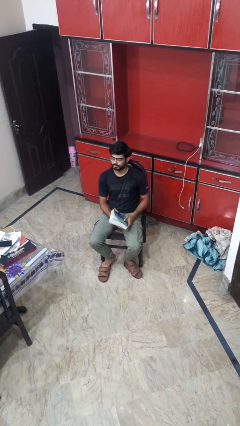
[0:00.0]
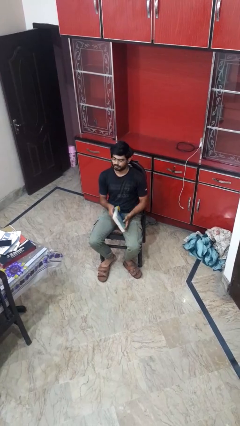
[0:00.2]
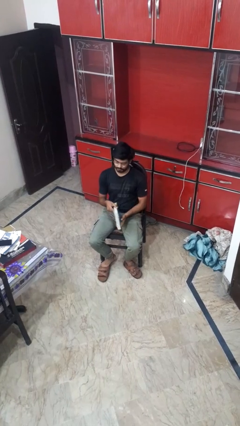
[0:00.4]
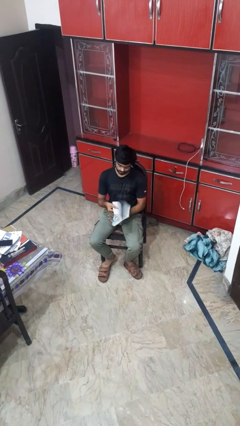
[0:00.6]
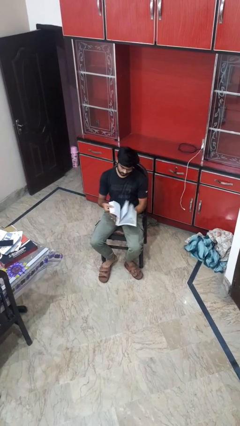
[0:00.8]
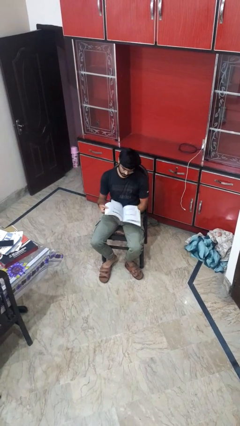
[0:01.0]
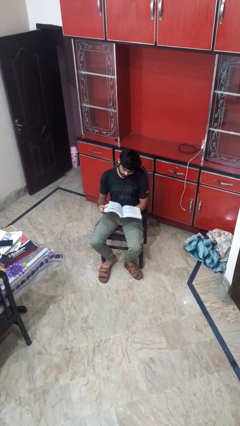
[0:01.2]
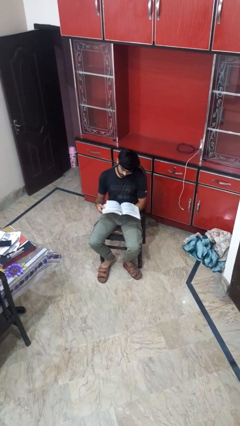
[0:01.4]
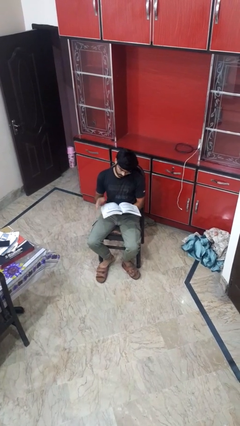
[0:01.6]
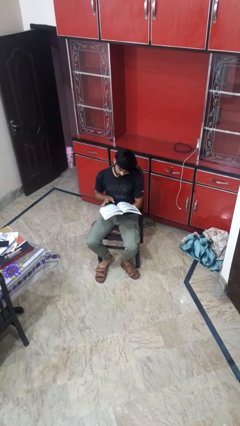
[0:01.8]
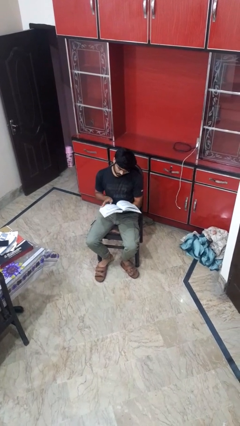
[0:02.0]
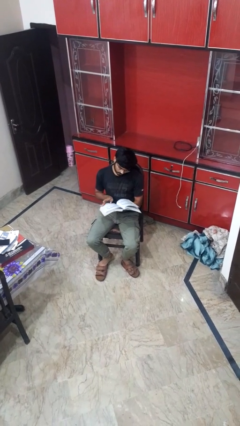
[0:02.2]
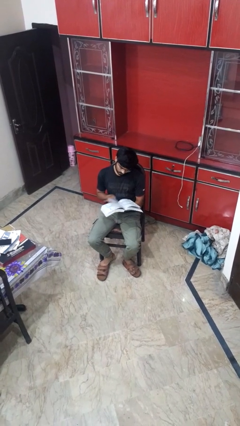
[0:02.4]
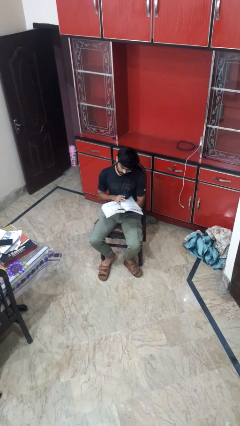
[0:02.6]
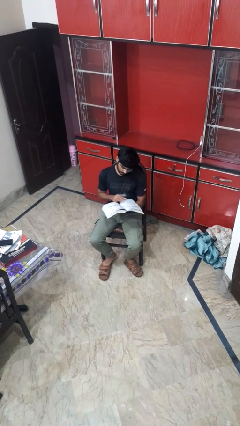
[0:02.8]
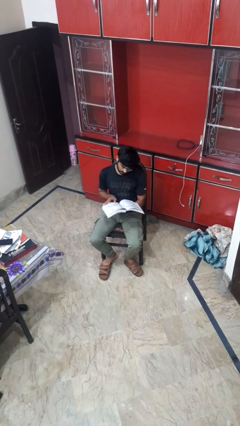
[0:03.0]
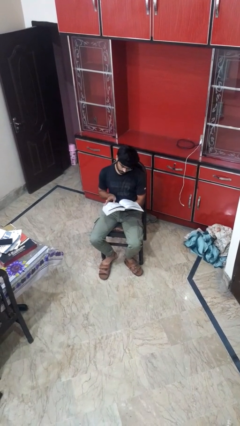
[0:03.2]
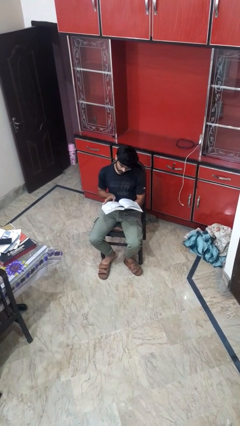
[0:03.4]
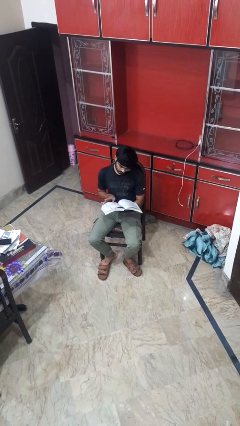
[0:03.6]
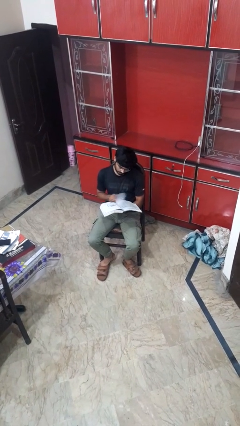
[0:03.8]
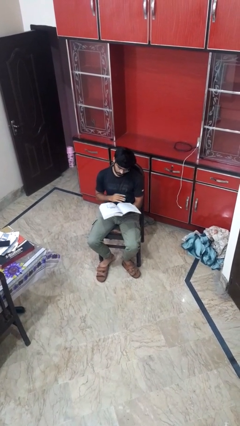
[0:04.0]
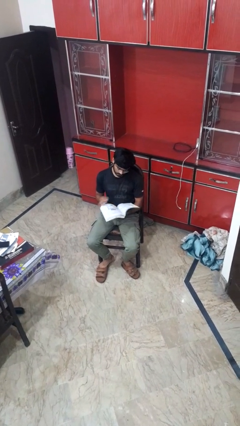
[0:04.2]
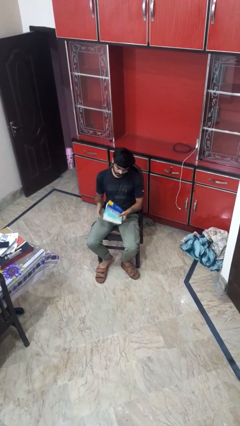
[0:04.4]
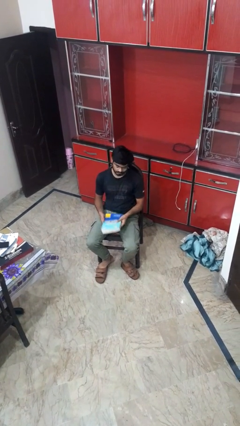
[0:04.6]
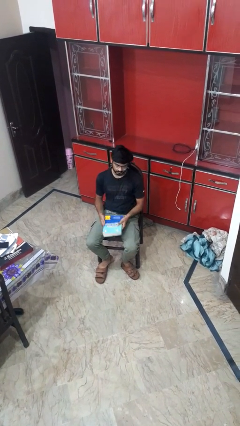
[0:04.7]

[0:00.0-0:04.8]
person reads book

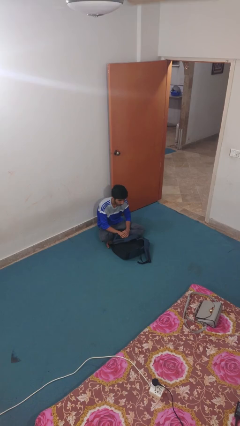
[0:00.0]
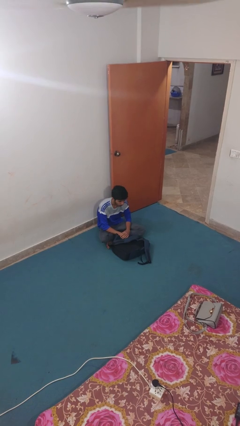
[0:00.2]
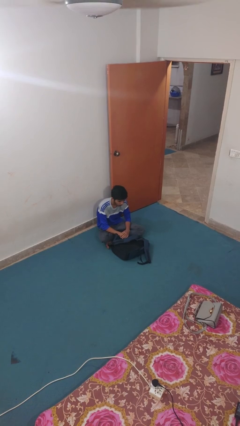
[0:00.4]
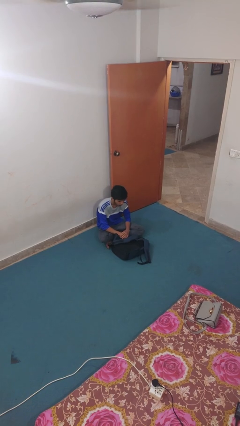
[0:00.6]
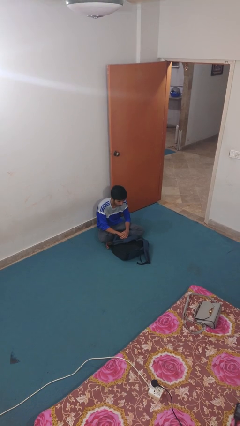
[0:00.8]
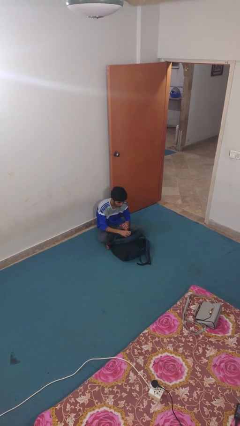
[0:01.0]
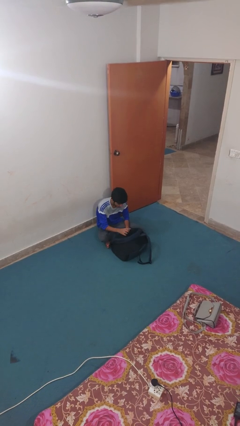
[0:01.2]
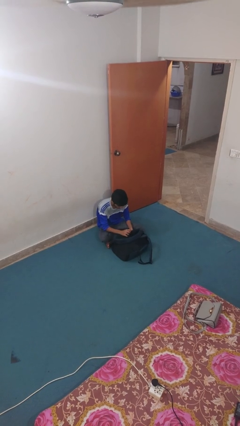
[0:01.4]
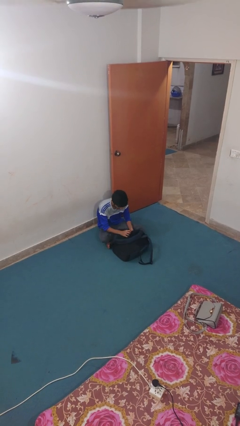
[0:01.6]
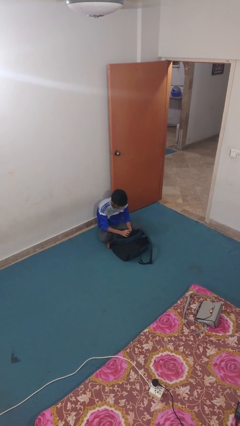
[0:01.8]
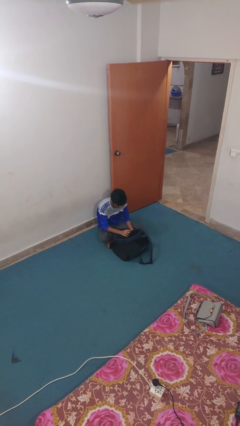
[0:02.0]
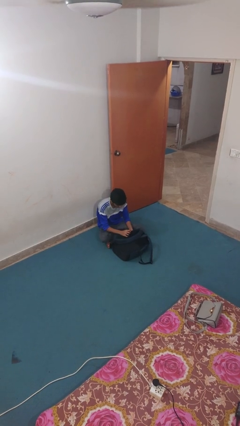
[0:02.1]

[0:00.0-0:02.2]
person searches in backpack

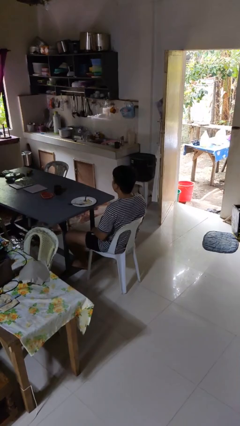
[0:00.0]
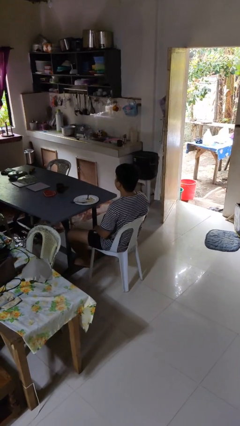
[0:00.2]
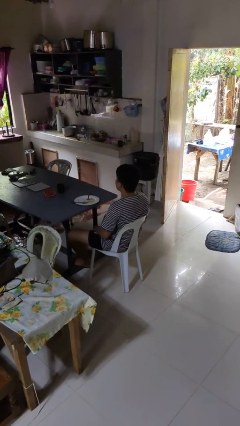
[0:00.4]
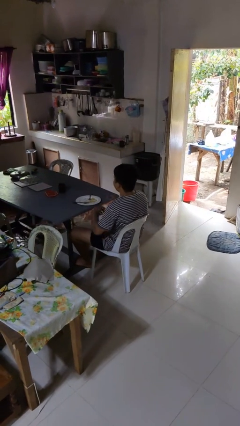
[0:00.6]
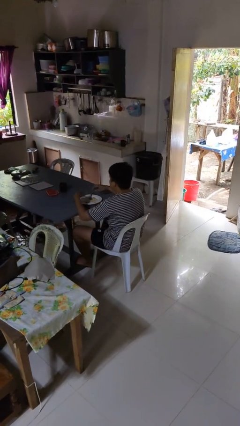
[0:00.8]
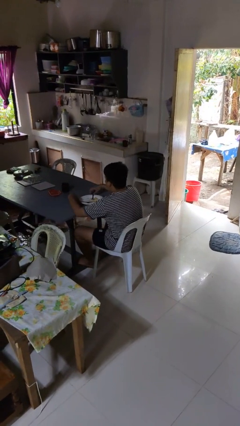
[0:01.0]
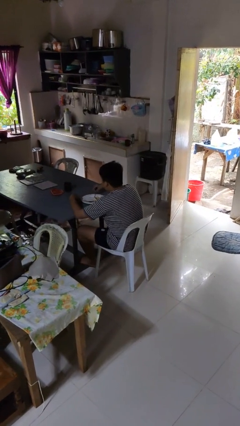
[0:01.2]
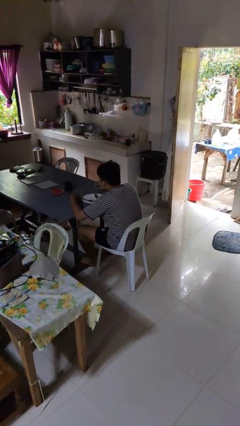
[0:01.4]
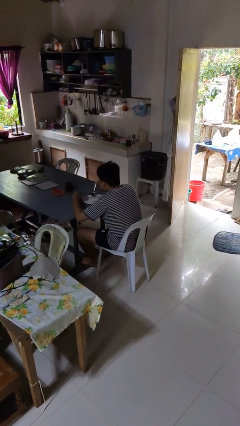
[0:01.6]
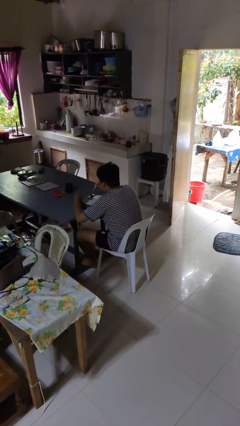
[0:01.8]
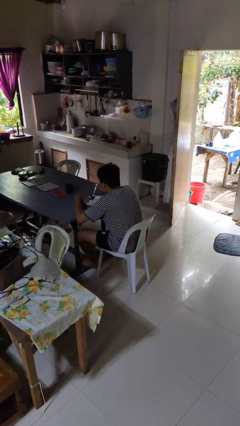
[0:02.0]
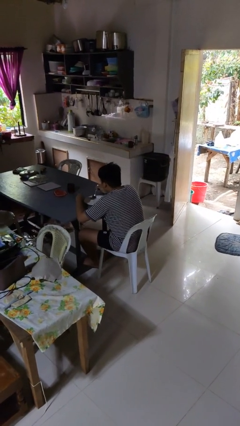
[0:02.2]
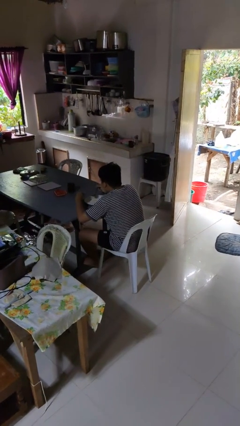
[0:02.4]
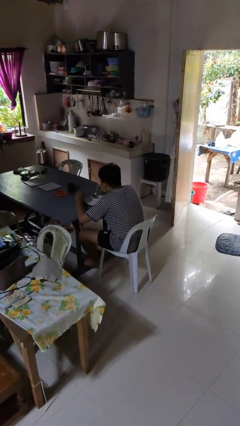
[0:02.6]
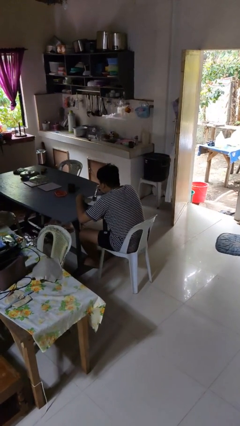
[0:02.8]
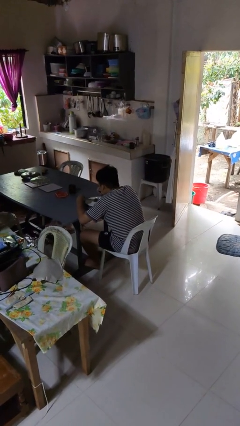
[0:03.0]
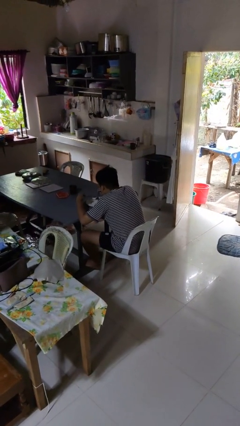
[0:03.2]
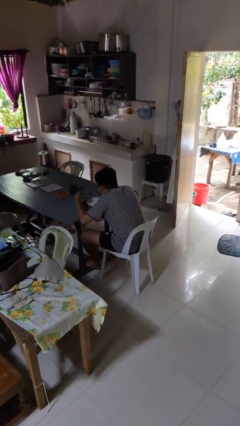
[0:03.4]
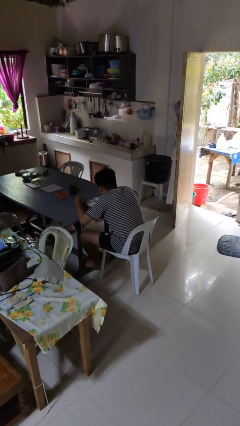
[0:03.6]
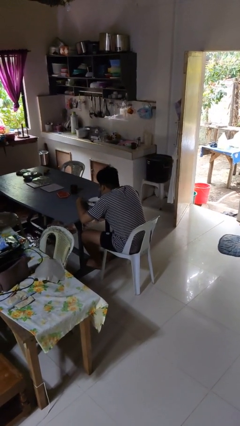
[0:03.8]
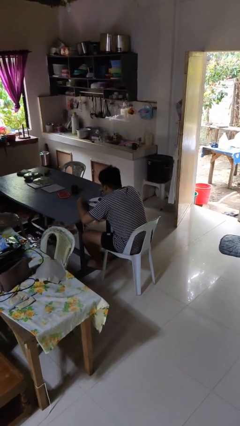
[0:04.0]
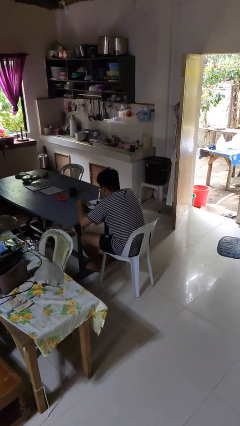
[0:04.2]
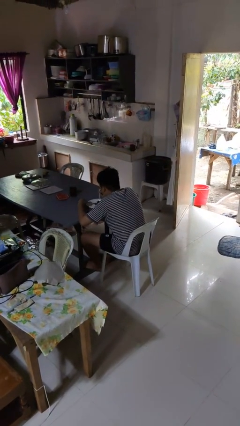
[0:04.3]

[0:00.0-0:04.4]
person eats with utensil

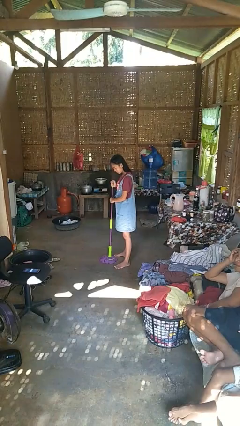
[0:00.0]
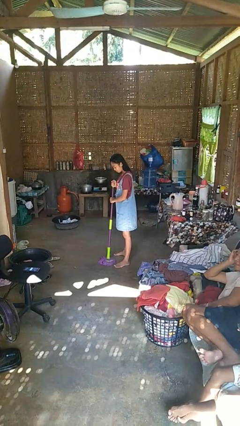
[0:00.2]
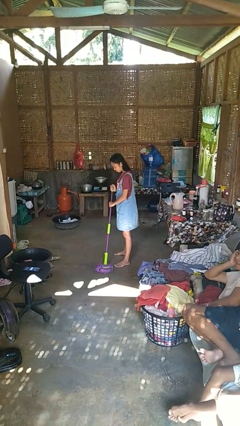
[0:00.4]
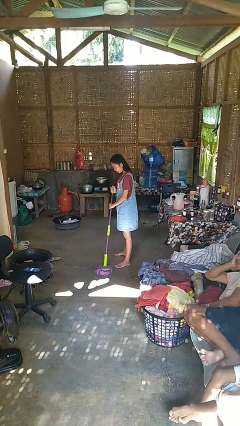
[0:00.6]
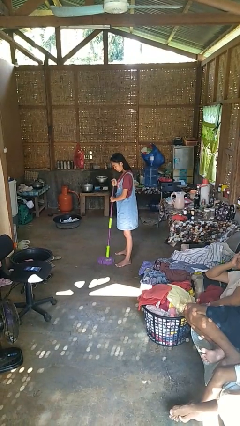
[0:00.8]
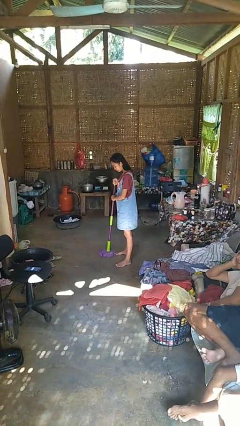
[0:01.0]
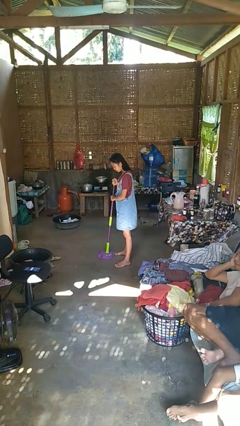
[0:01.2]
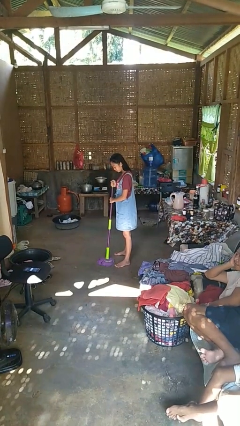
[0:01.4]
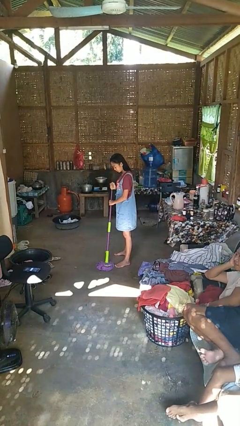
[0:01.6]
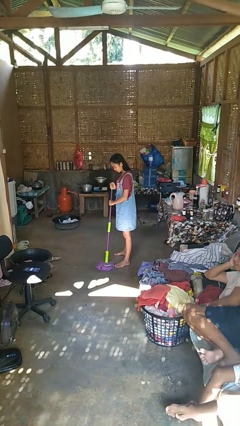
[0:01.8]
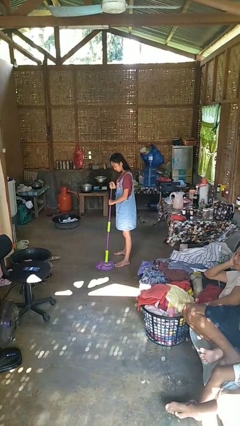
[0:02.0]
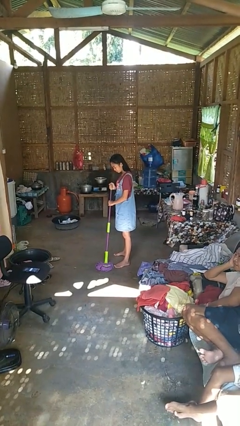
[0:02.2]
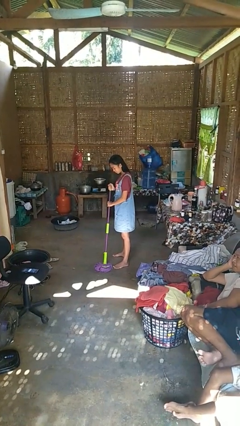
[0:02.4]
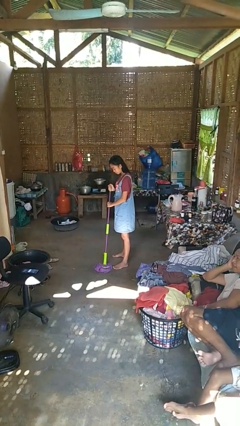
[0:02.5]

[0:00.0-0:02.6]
person mops

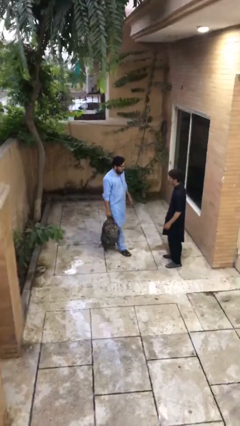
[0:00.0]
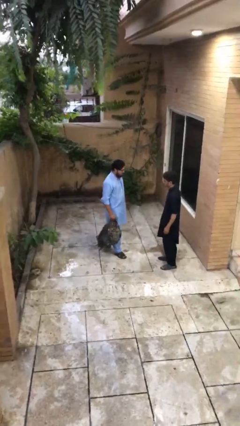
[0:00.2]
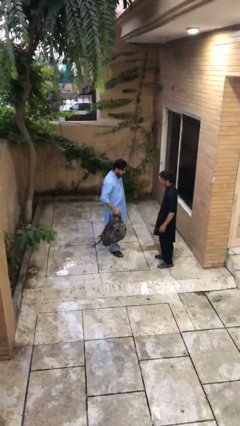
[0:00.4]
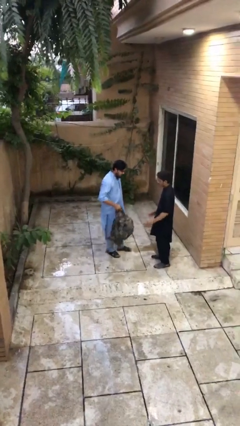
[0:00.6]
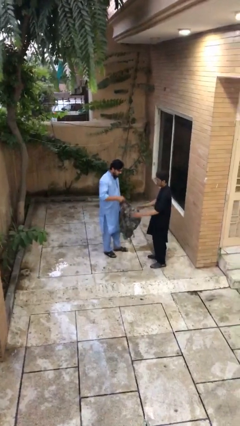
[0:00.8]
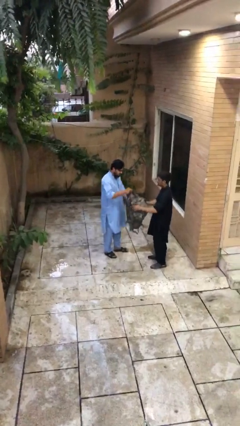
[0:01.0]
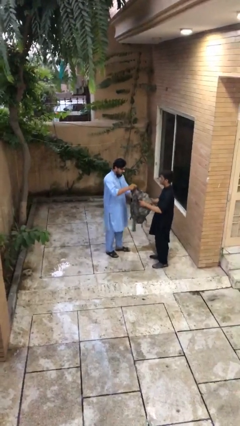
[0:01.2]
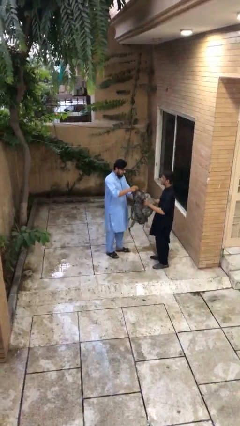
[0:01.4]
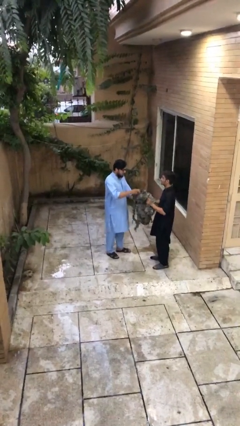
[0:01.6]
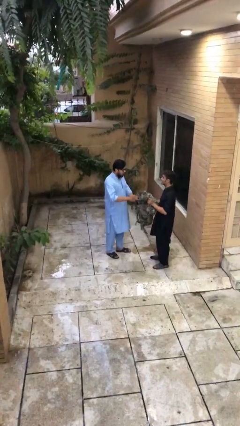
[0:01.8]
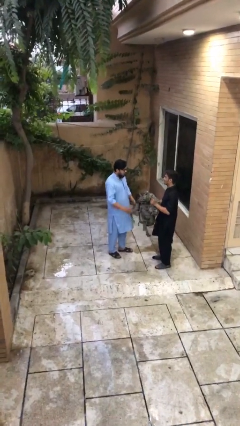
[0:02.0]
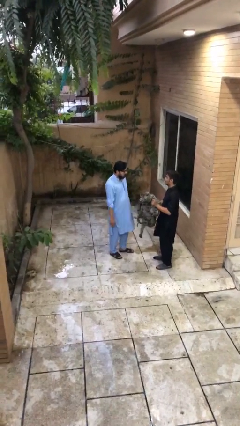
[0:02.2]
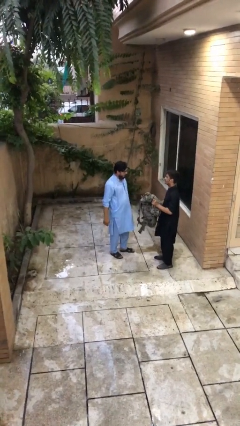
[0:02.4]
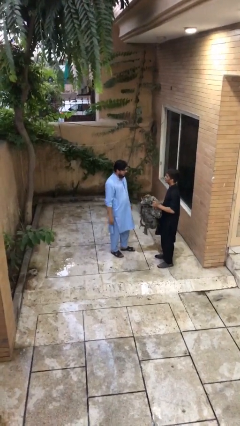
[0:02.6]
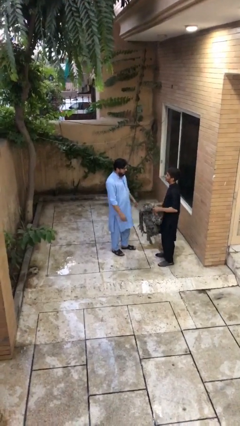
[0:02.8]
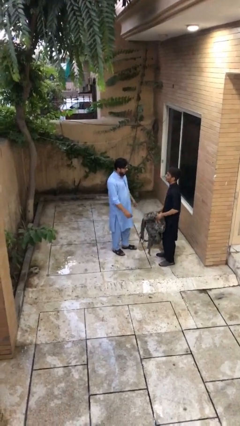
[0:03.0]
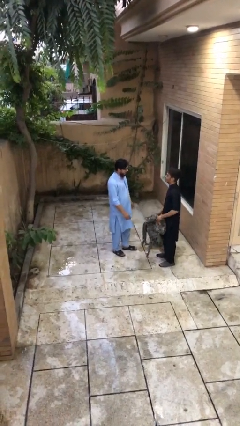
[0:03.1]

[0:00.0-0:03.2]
person transfers object to person

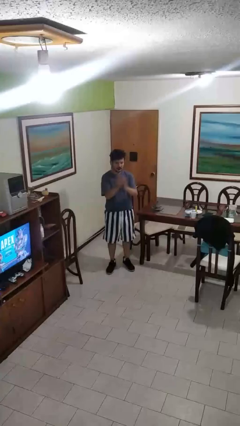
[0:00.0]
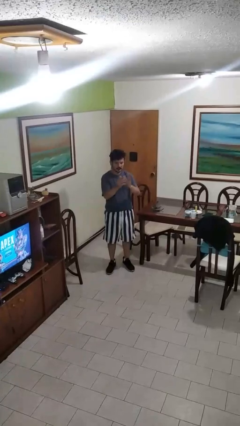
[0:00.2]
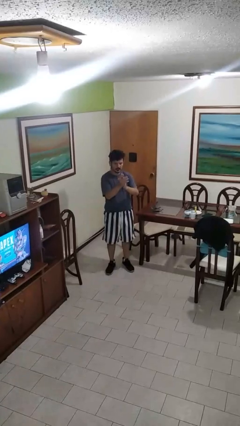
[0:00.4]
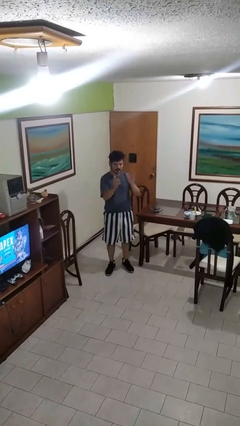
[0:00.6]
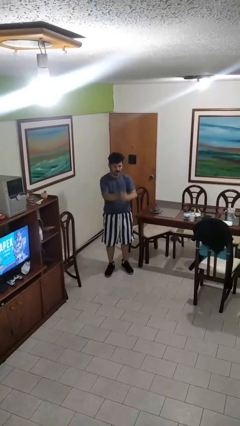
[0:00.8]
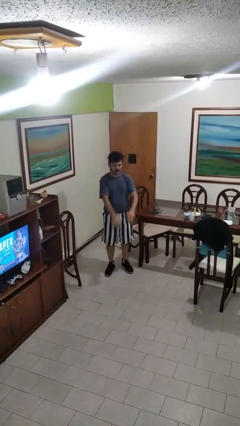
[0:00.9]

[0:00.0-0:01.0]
person claps hands
